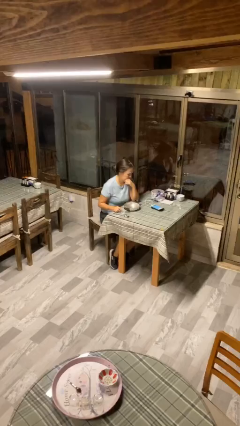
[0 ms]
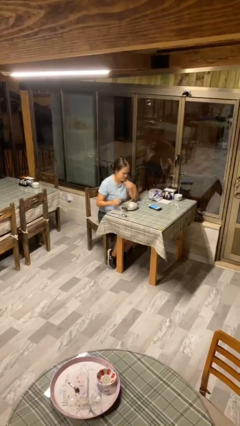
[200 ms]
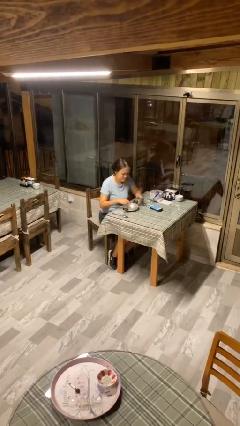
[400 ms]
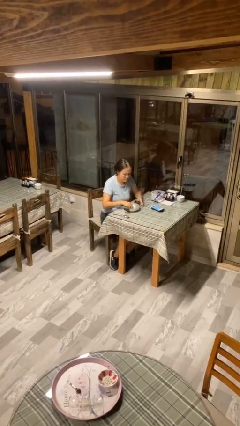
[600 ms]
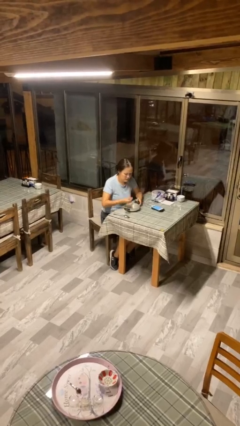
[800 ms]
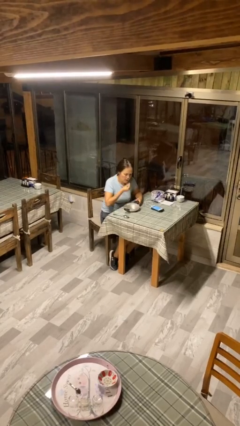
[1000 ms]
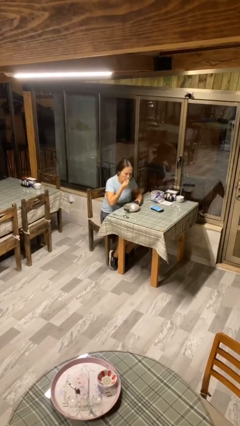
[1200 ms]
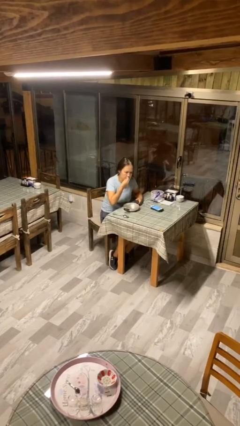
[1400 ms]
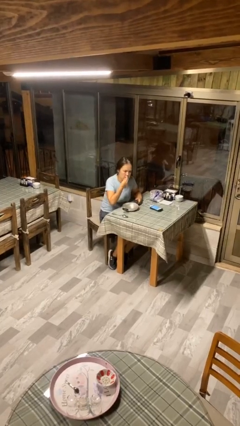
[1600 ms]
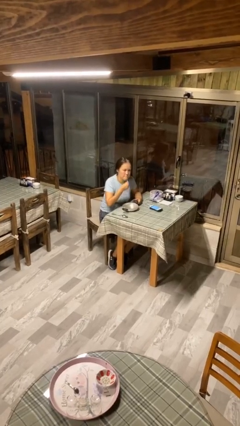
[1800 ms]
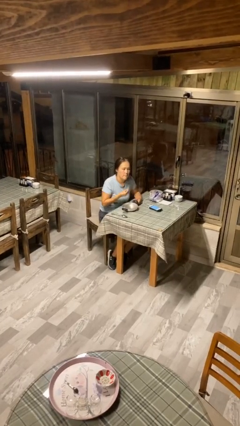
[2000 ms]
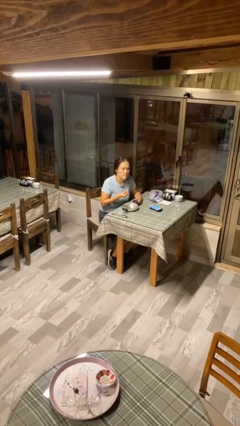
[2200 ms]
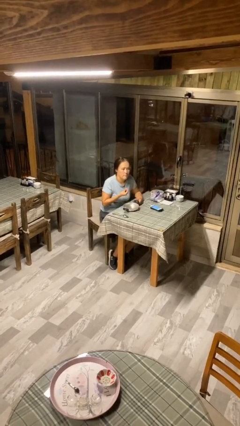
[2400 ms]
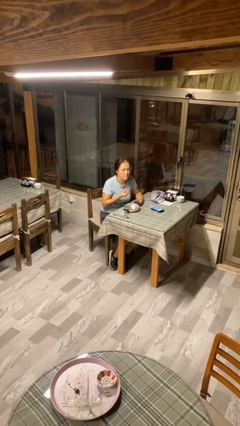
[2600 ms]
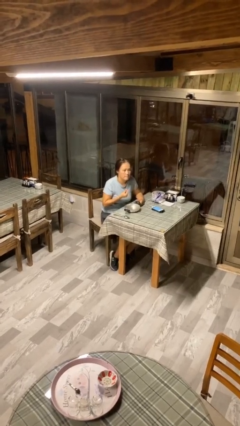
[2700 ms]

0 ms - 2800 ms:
person eats with hands

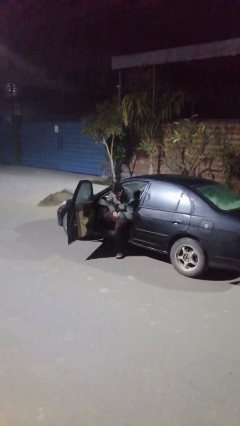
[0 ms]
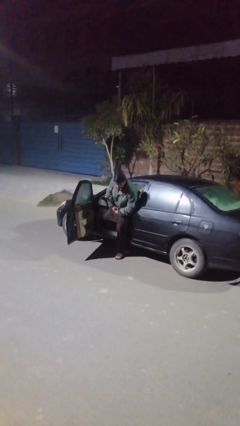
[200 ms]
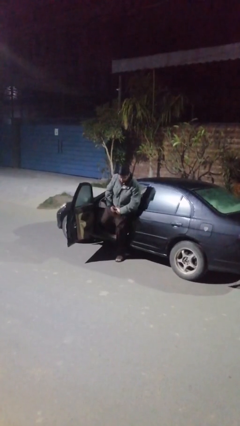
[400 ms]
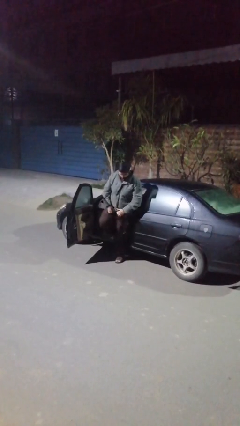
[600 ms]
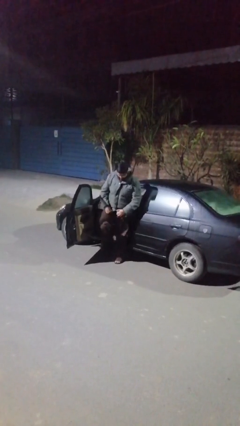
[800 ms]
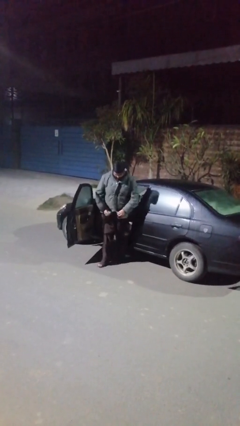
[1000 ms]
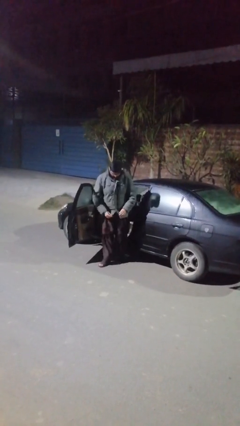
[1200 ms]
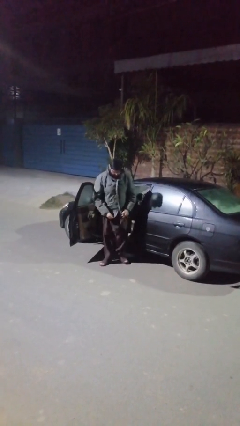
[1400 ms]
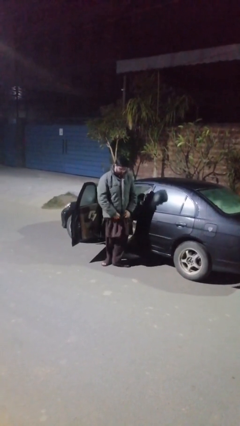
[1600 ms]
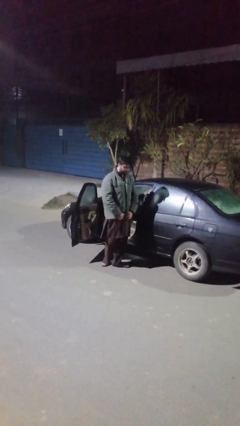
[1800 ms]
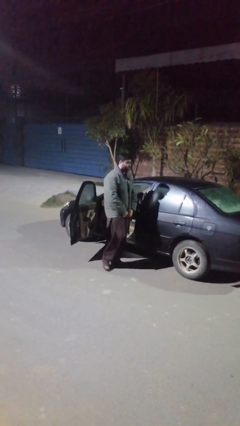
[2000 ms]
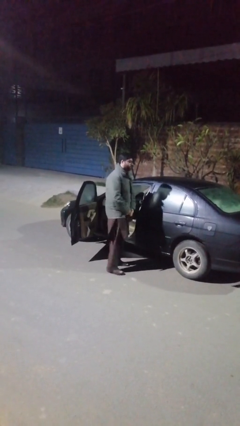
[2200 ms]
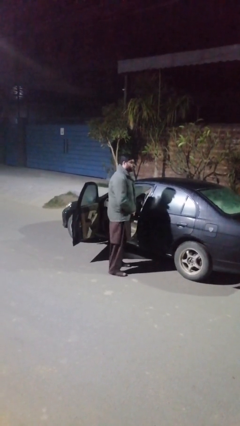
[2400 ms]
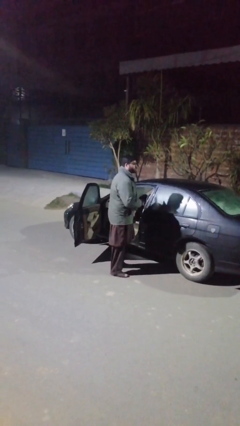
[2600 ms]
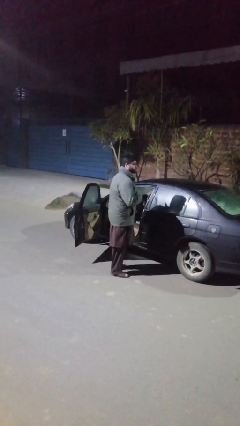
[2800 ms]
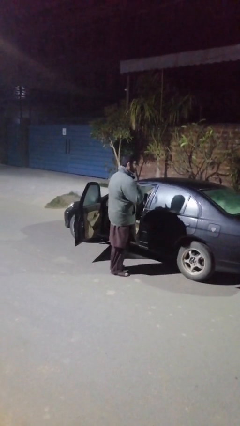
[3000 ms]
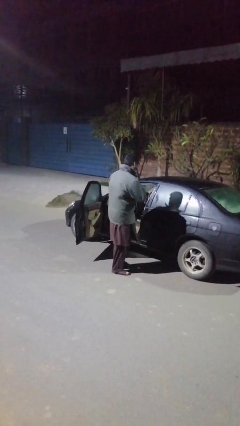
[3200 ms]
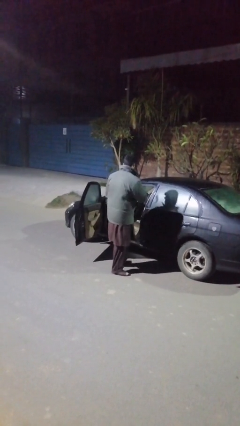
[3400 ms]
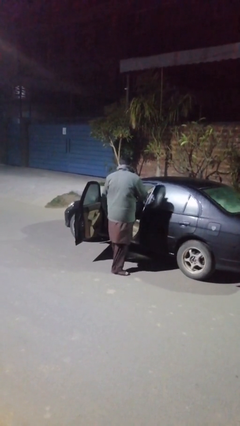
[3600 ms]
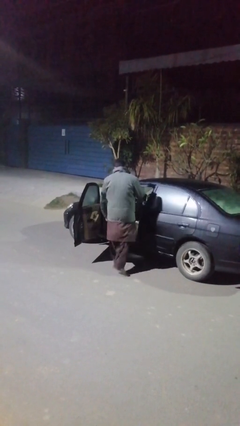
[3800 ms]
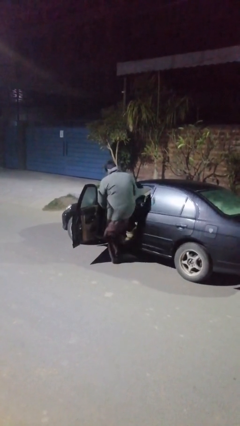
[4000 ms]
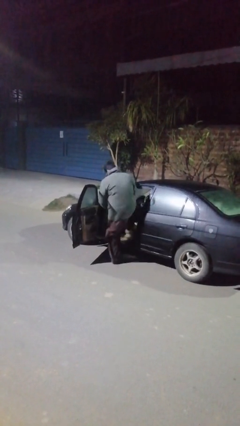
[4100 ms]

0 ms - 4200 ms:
person exits car

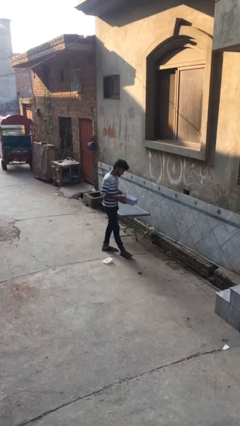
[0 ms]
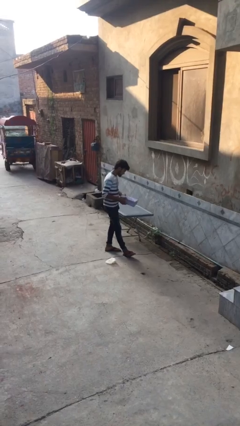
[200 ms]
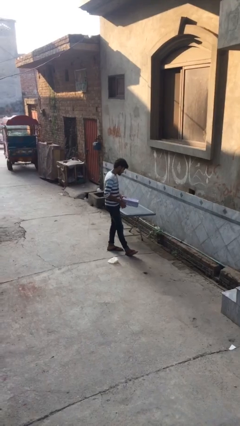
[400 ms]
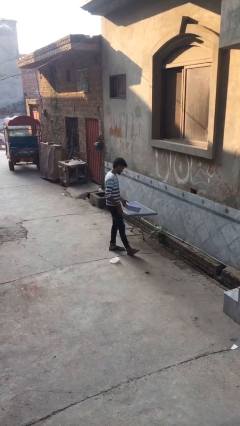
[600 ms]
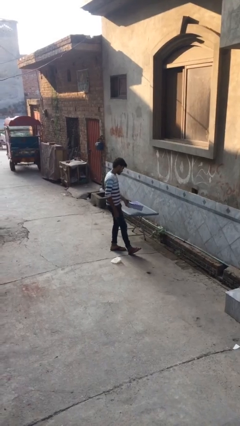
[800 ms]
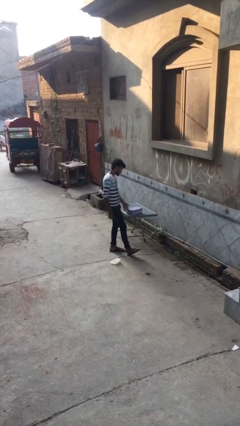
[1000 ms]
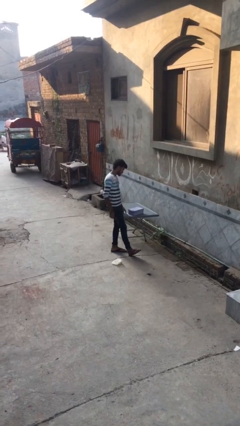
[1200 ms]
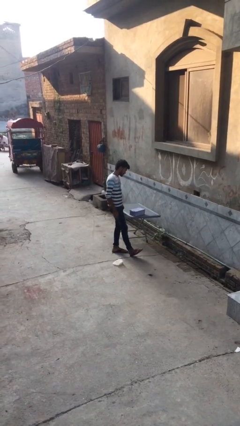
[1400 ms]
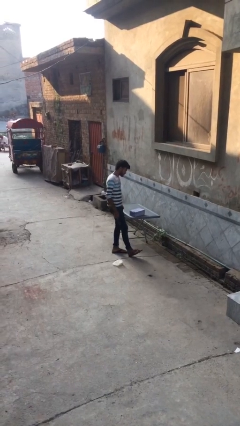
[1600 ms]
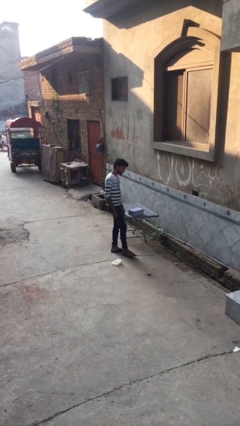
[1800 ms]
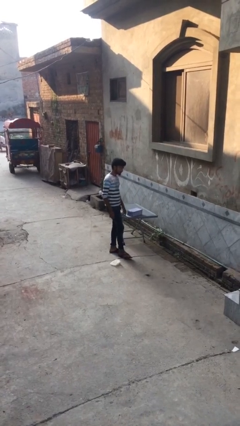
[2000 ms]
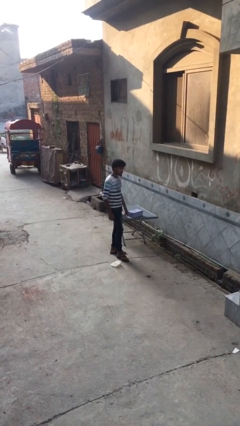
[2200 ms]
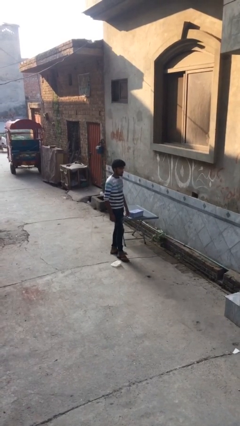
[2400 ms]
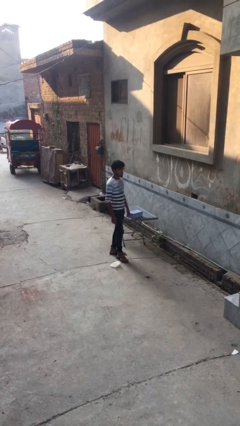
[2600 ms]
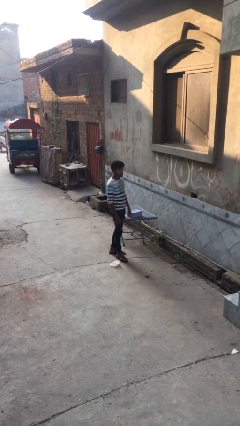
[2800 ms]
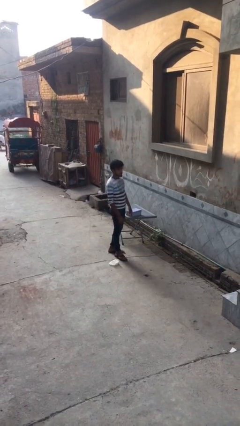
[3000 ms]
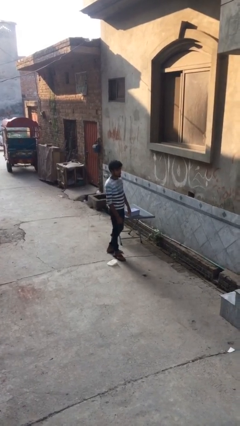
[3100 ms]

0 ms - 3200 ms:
person puts down object on table

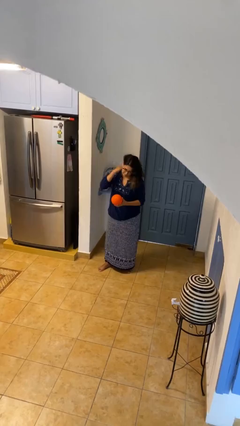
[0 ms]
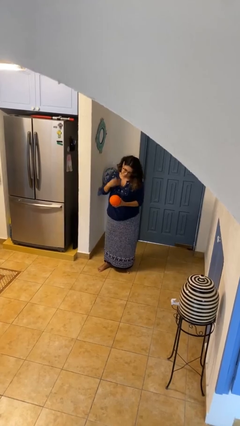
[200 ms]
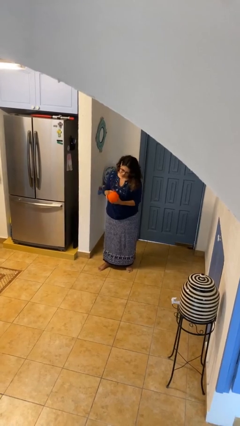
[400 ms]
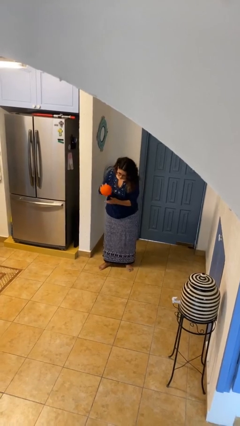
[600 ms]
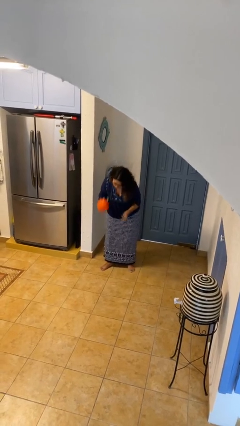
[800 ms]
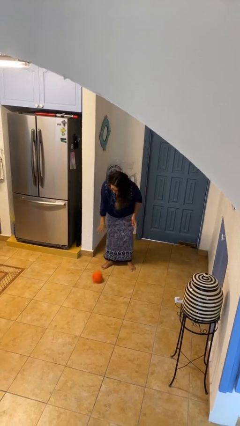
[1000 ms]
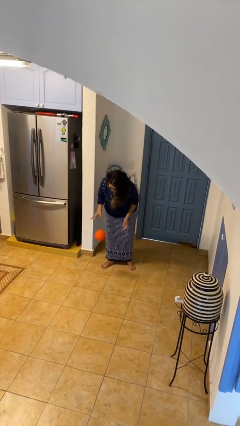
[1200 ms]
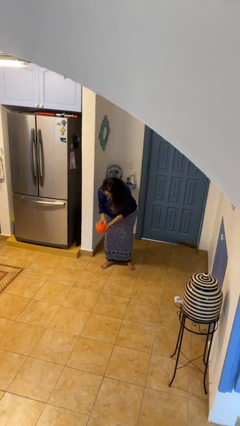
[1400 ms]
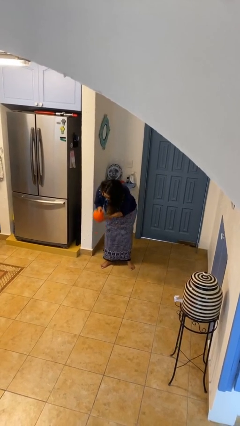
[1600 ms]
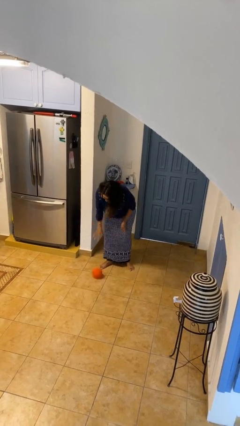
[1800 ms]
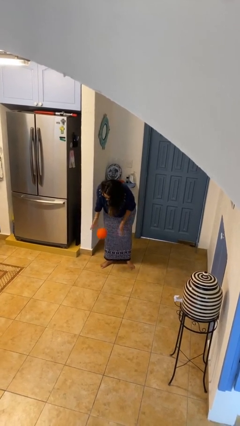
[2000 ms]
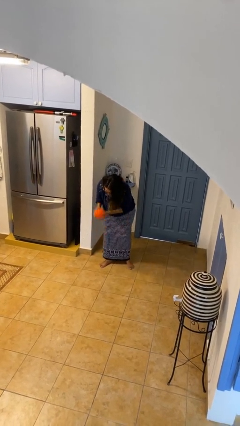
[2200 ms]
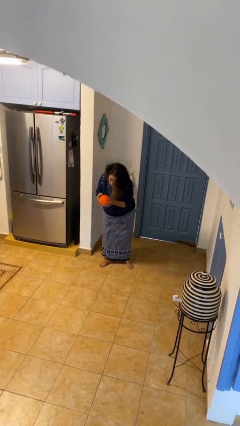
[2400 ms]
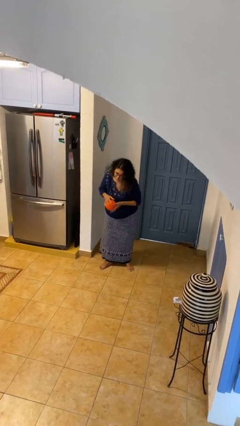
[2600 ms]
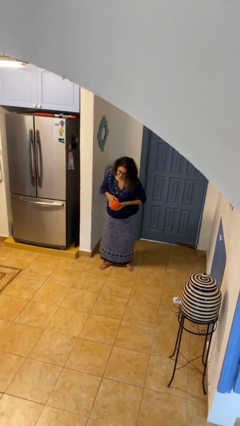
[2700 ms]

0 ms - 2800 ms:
person bounces ball on floor

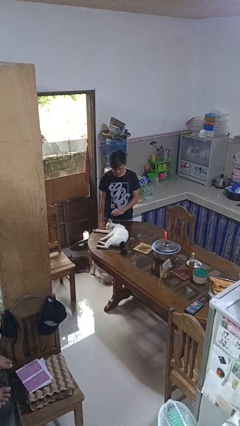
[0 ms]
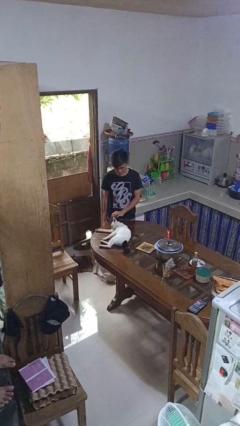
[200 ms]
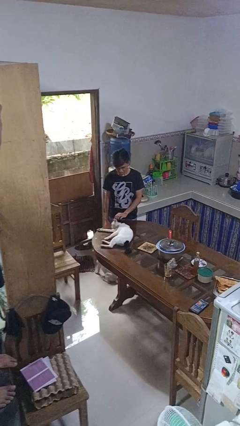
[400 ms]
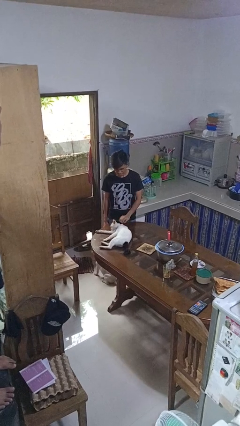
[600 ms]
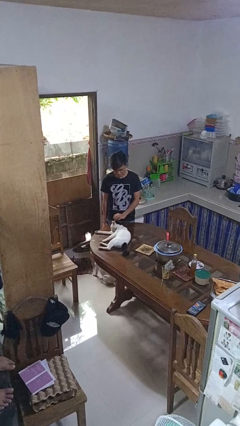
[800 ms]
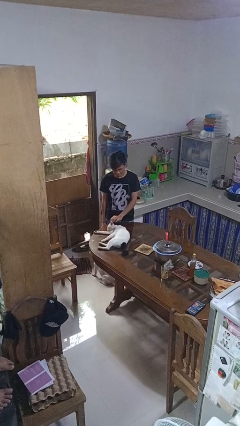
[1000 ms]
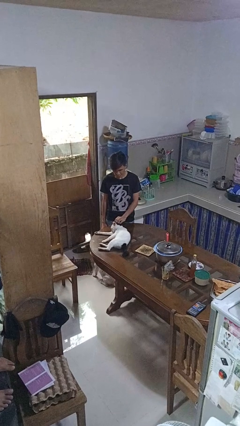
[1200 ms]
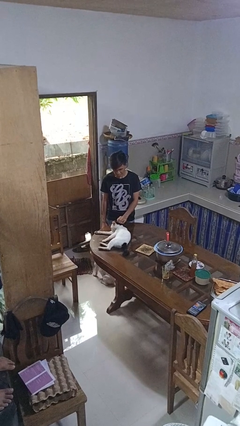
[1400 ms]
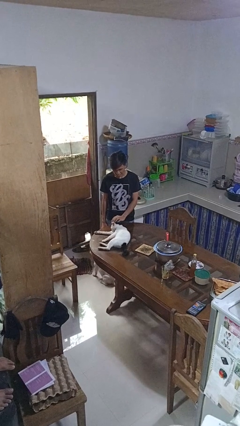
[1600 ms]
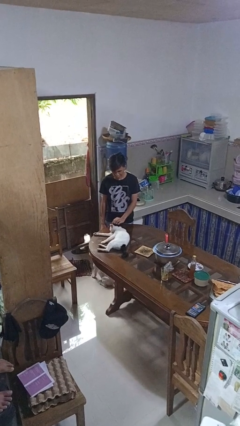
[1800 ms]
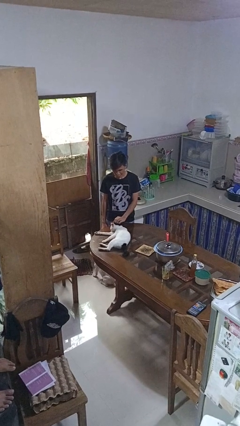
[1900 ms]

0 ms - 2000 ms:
person pets cat

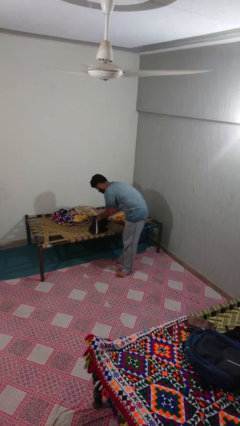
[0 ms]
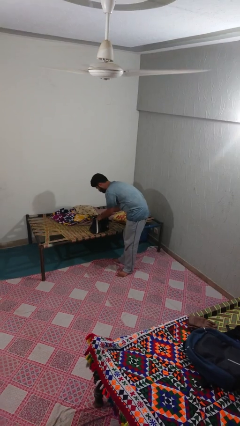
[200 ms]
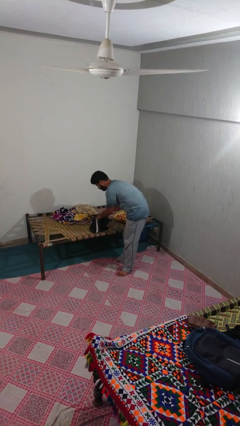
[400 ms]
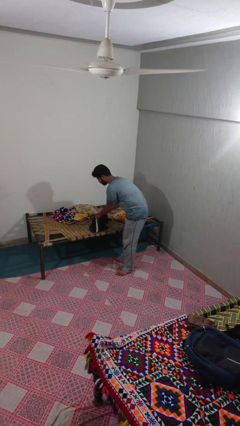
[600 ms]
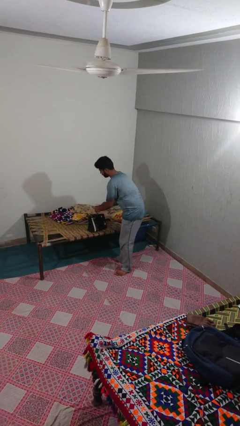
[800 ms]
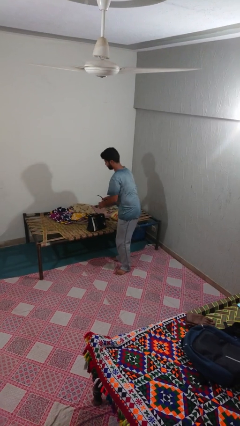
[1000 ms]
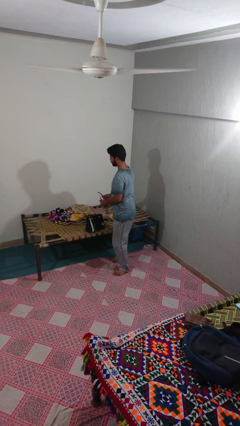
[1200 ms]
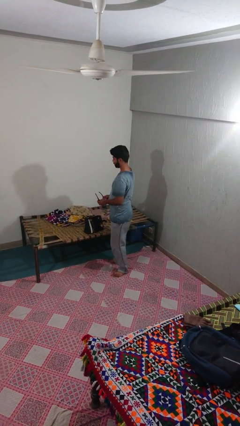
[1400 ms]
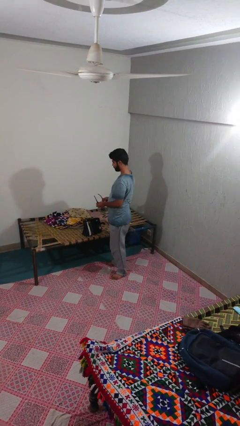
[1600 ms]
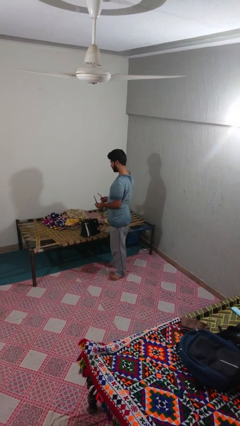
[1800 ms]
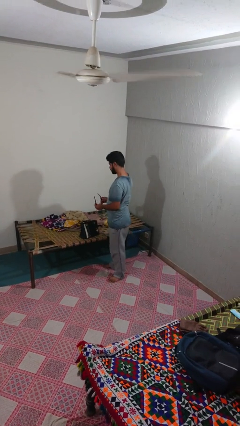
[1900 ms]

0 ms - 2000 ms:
person takes object from purse

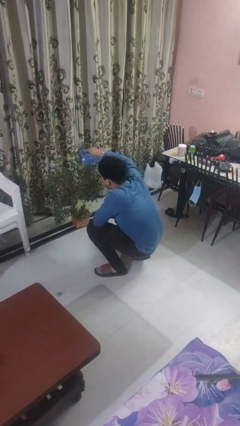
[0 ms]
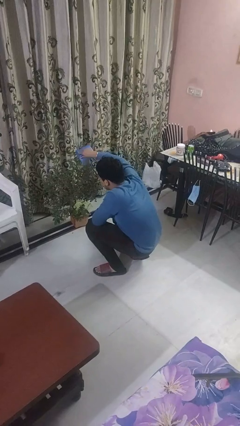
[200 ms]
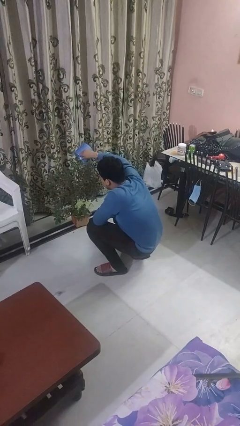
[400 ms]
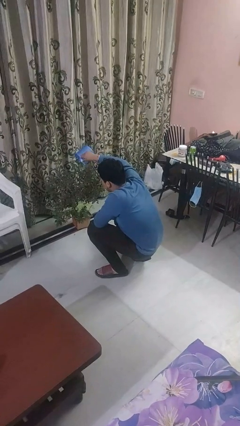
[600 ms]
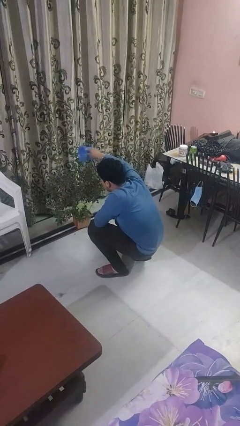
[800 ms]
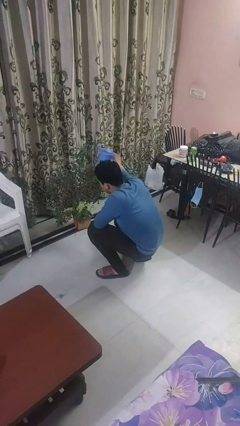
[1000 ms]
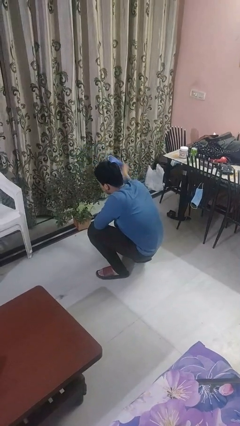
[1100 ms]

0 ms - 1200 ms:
person waters houseplant
